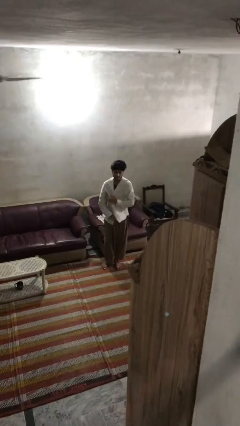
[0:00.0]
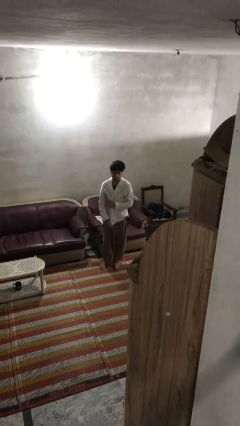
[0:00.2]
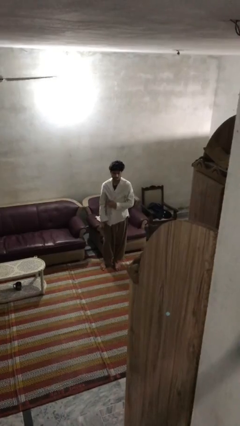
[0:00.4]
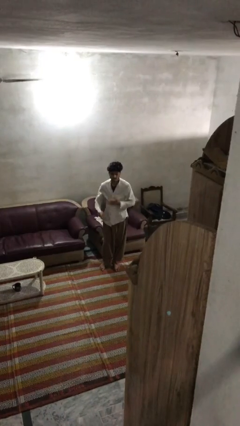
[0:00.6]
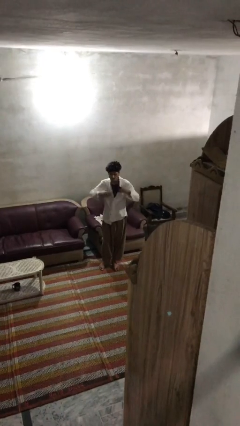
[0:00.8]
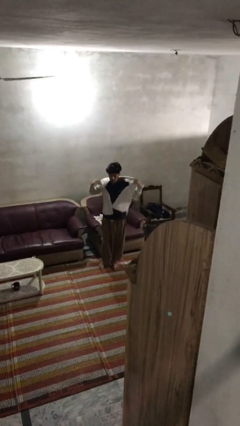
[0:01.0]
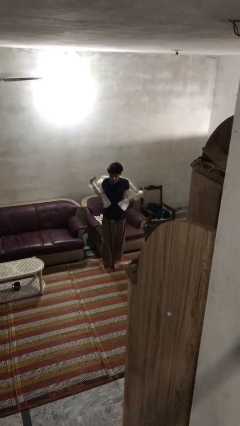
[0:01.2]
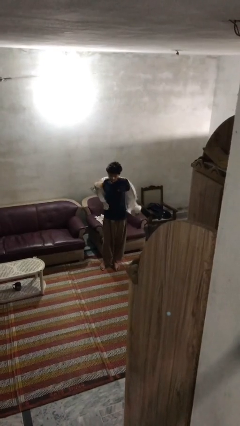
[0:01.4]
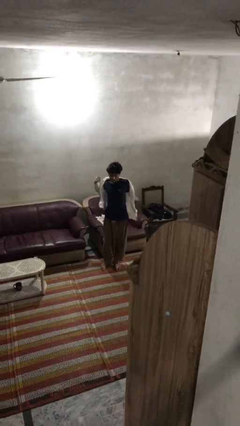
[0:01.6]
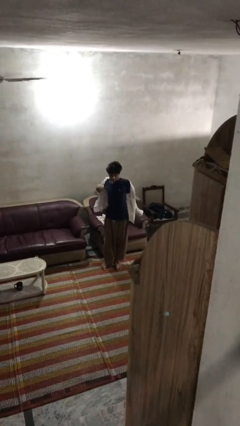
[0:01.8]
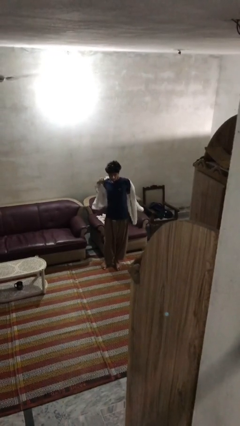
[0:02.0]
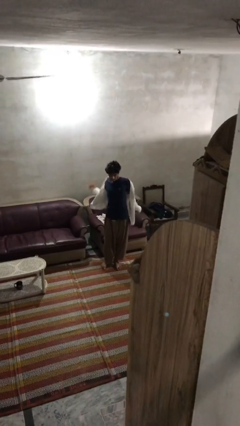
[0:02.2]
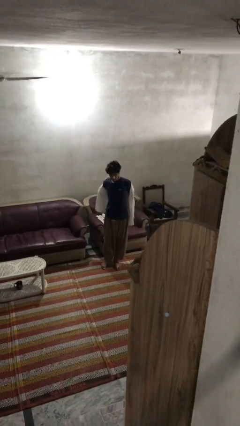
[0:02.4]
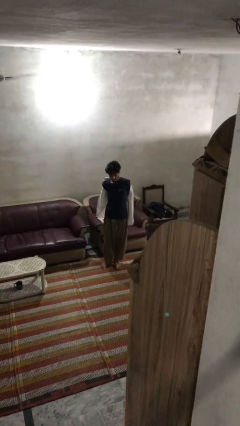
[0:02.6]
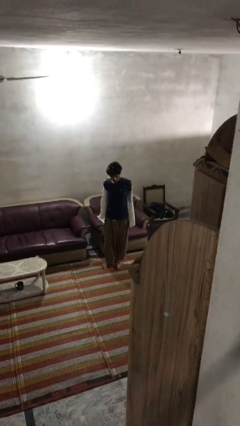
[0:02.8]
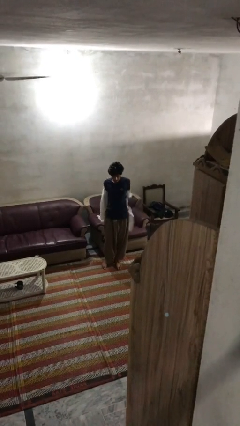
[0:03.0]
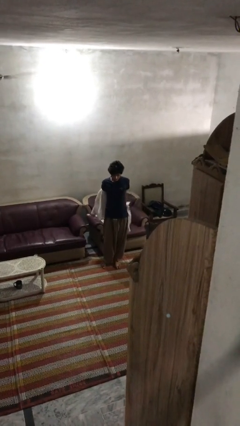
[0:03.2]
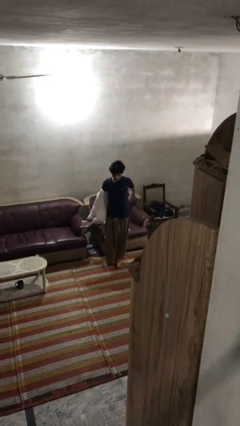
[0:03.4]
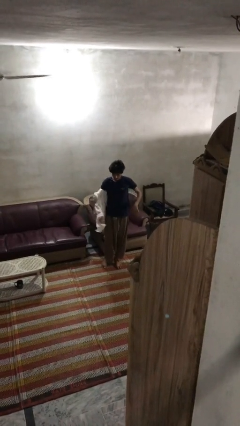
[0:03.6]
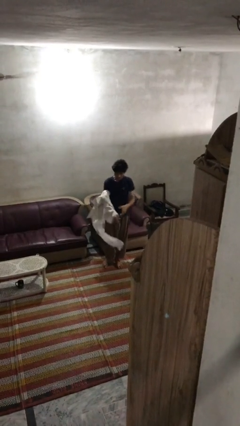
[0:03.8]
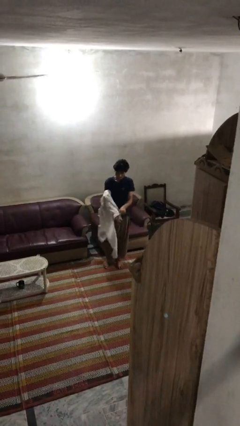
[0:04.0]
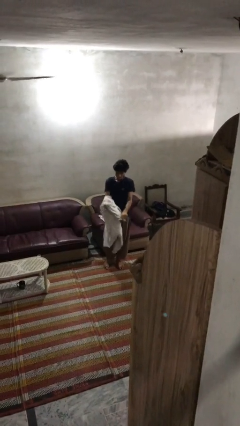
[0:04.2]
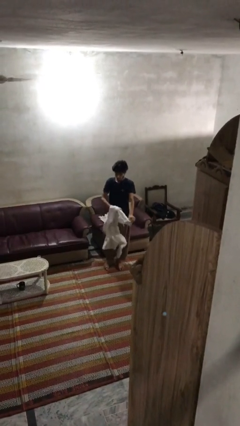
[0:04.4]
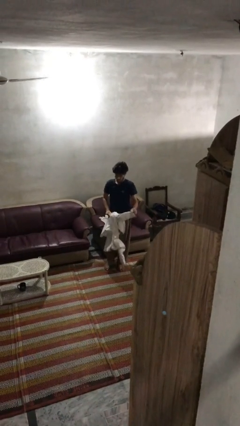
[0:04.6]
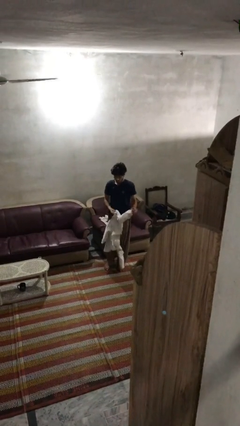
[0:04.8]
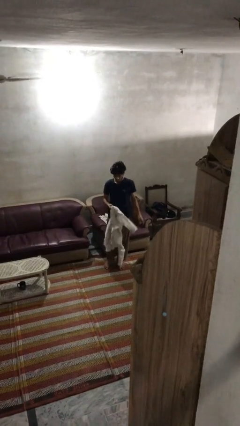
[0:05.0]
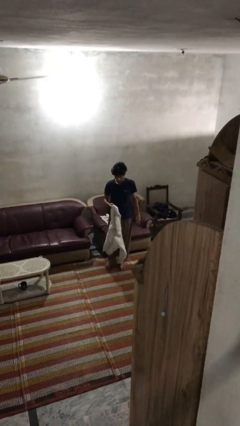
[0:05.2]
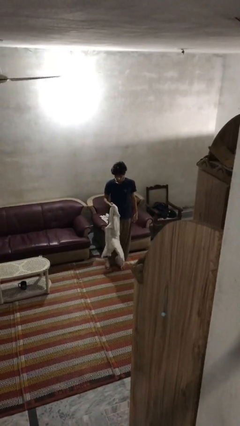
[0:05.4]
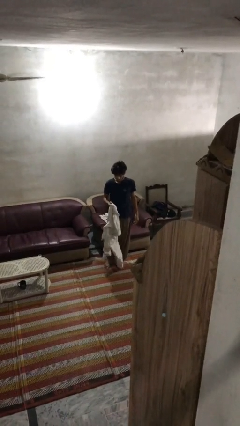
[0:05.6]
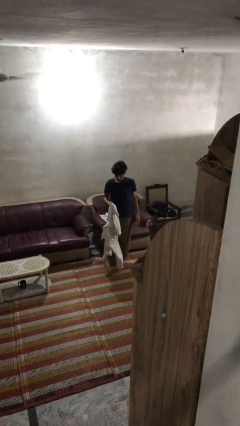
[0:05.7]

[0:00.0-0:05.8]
person takes off shirt

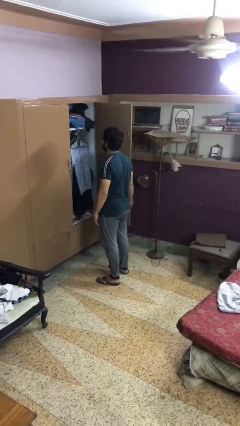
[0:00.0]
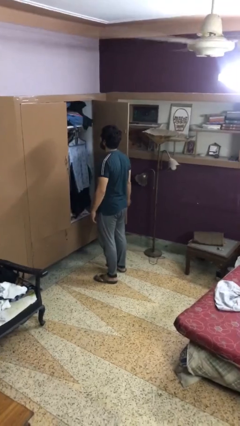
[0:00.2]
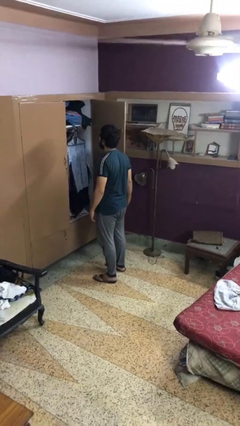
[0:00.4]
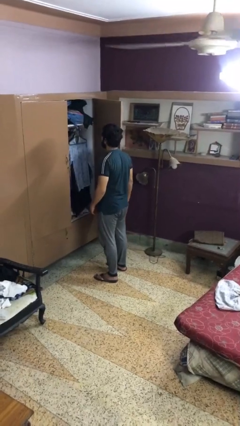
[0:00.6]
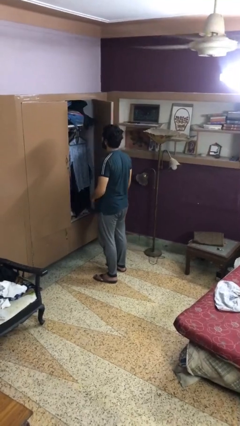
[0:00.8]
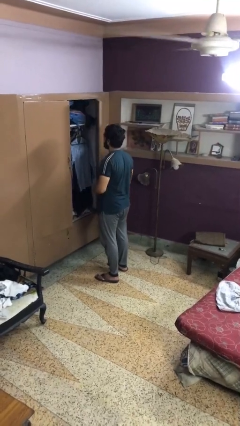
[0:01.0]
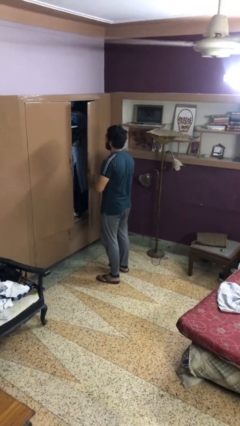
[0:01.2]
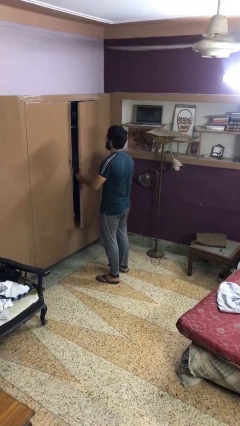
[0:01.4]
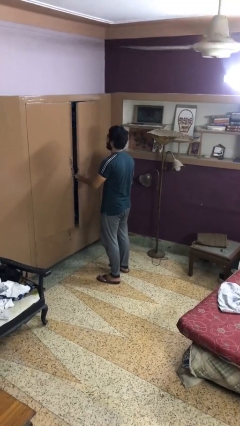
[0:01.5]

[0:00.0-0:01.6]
person closes closet door

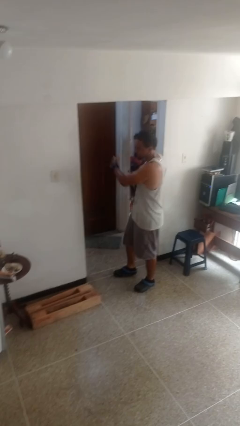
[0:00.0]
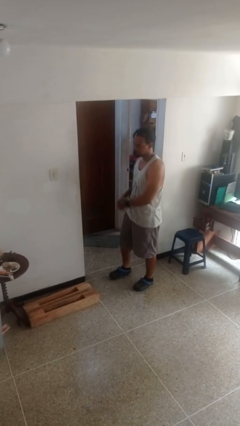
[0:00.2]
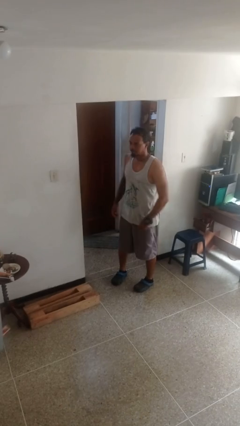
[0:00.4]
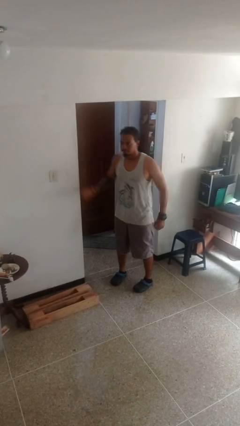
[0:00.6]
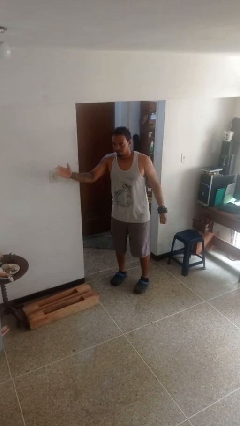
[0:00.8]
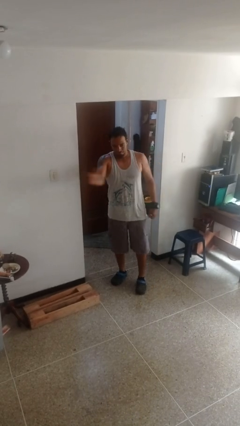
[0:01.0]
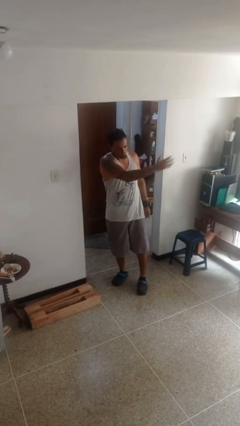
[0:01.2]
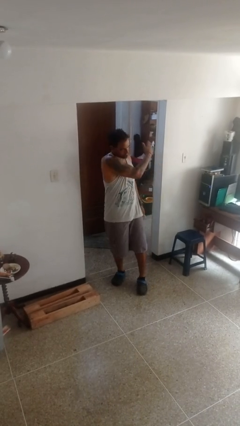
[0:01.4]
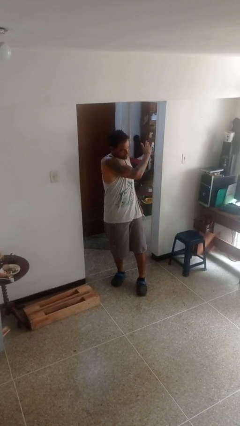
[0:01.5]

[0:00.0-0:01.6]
person gestures swipe left

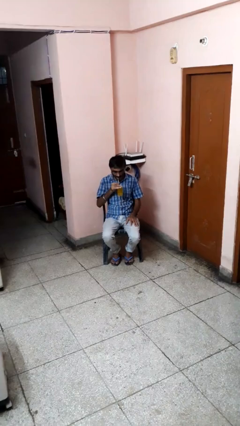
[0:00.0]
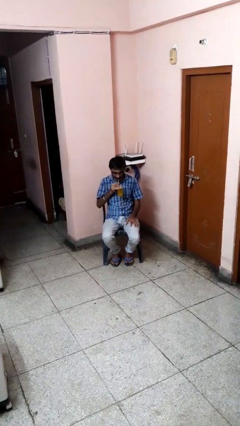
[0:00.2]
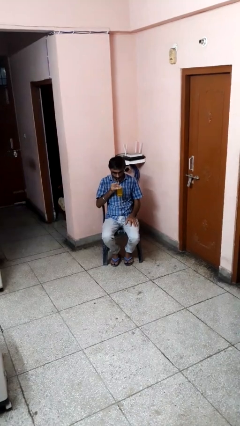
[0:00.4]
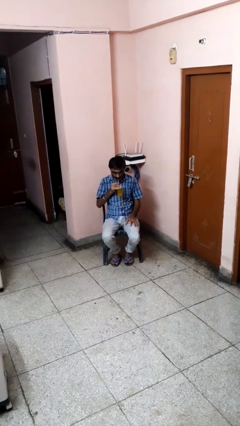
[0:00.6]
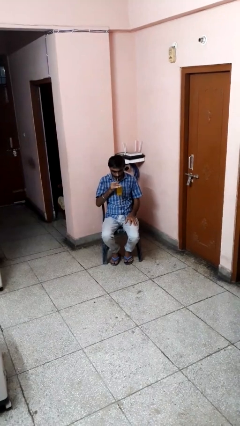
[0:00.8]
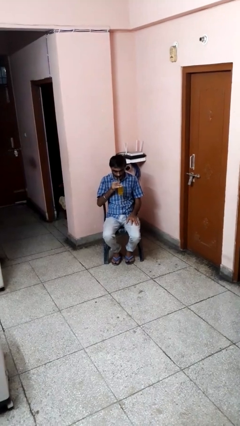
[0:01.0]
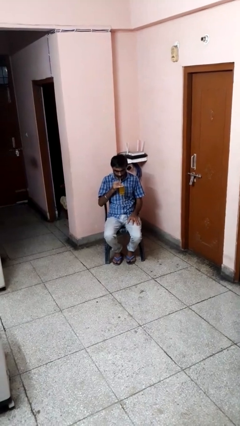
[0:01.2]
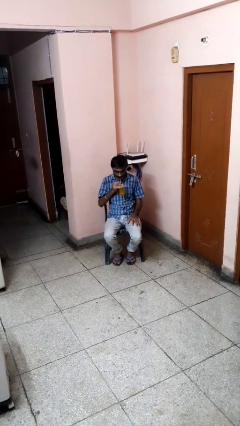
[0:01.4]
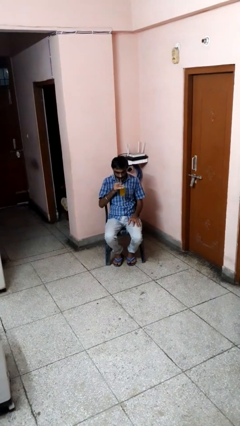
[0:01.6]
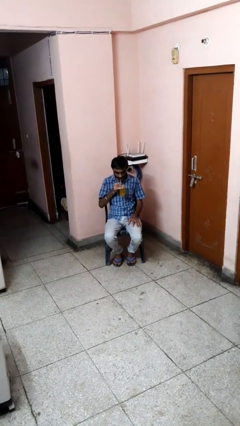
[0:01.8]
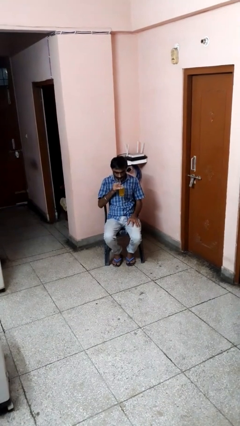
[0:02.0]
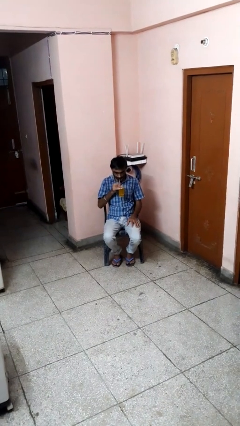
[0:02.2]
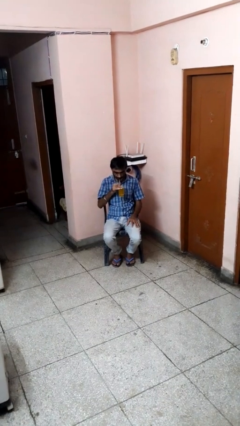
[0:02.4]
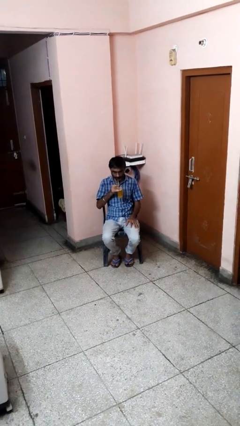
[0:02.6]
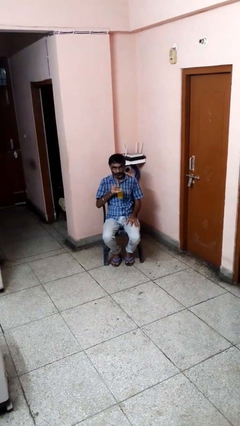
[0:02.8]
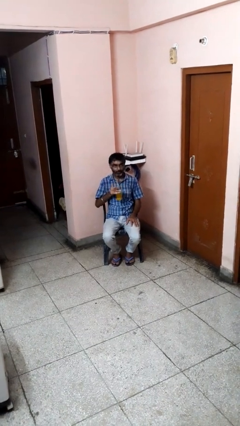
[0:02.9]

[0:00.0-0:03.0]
person drinks from straw

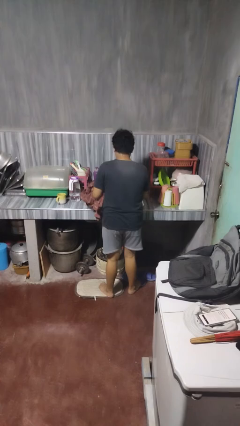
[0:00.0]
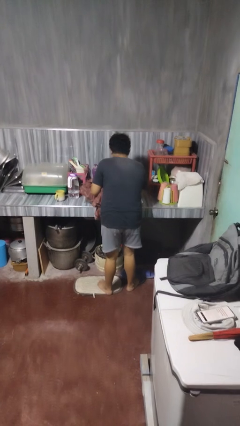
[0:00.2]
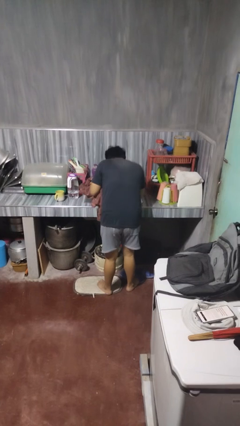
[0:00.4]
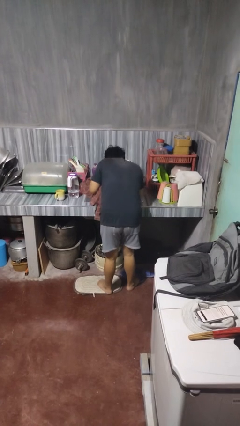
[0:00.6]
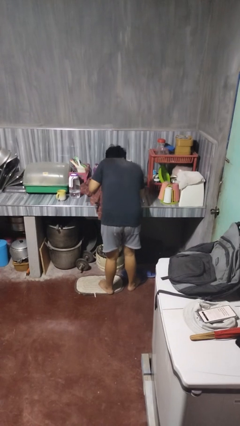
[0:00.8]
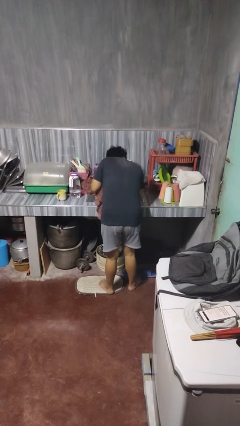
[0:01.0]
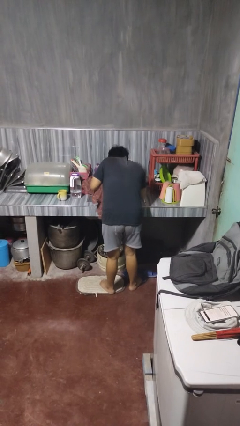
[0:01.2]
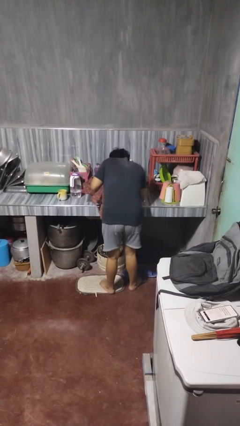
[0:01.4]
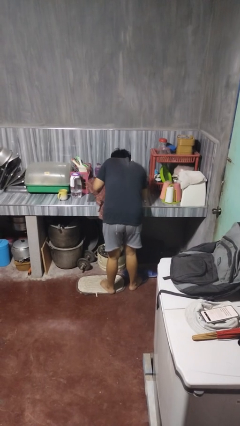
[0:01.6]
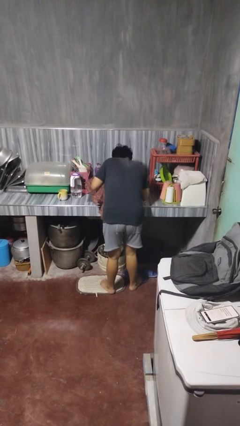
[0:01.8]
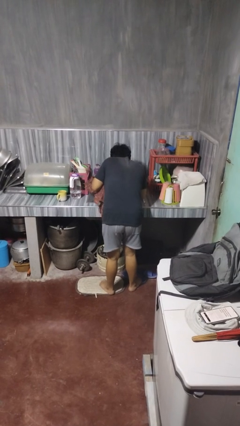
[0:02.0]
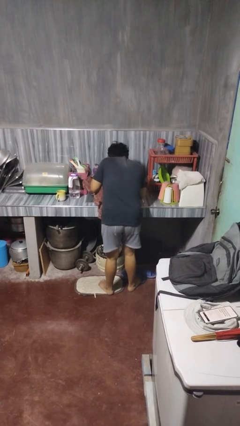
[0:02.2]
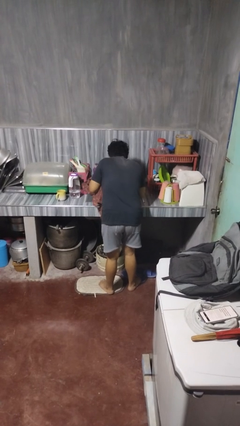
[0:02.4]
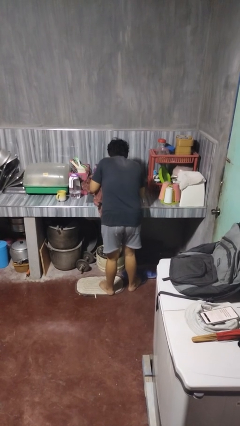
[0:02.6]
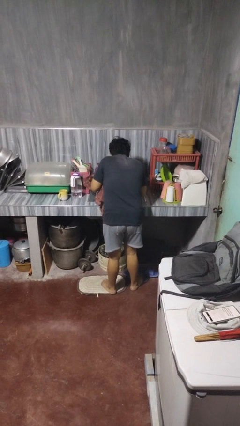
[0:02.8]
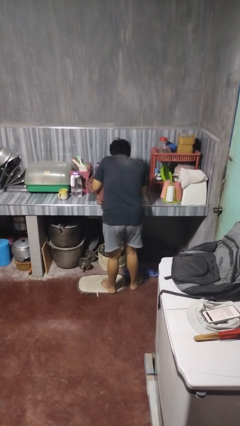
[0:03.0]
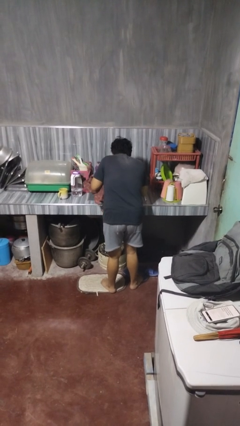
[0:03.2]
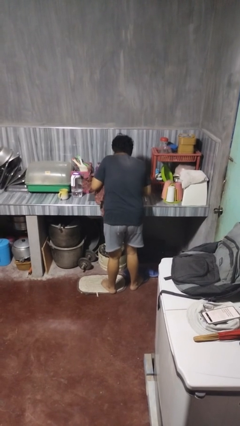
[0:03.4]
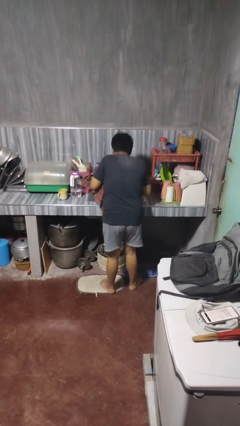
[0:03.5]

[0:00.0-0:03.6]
person washes face

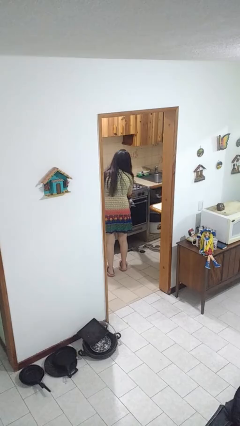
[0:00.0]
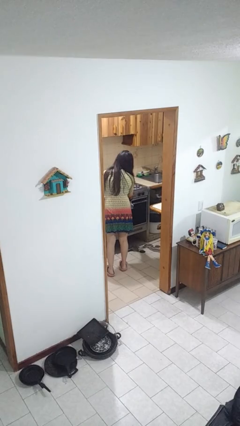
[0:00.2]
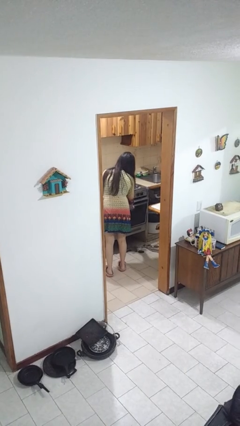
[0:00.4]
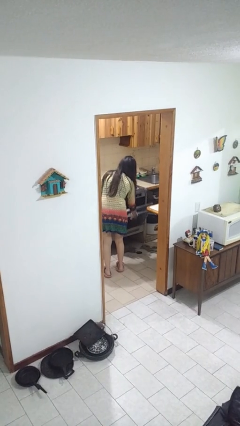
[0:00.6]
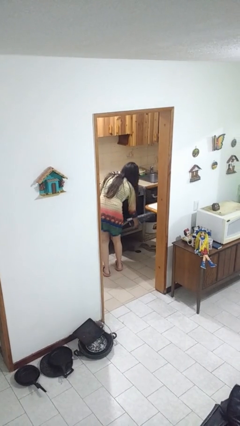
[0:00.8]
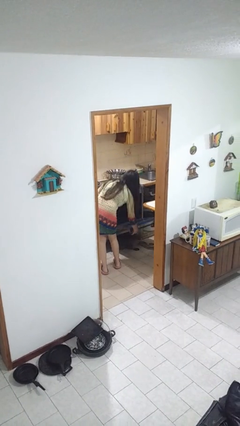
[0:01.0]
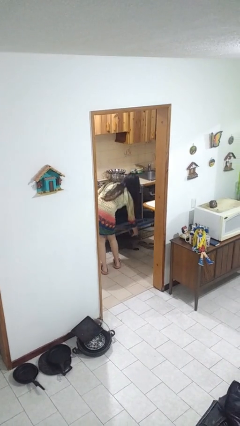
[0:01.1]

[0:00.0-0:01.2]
person opens oven door

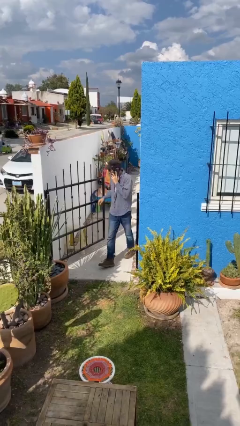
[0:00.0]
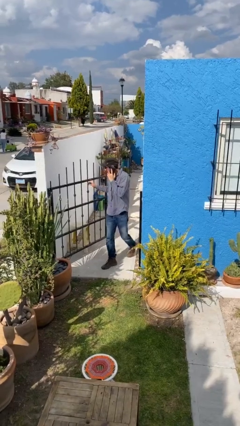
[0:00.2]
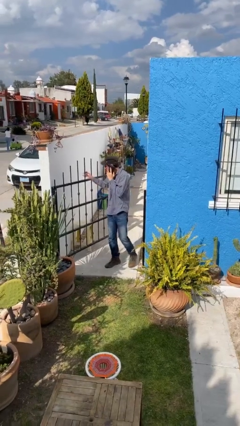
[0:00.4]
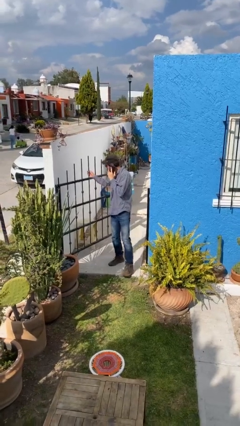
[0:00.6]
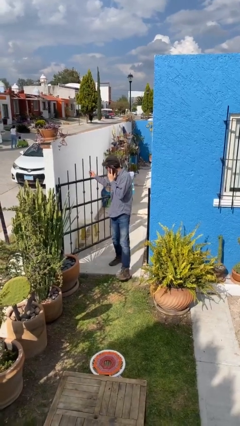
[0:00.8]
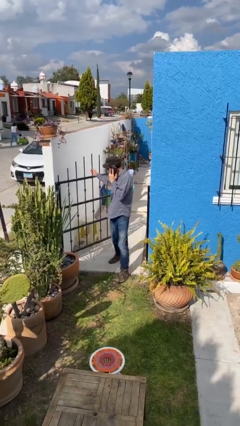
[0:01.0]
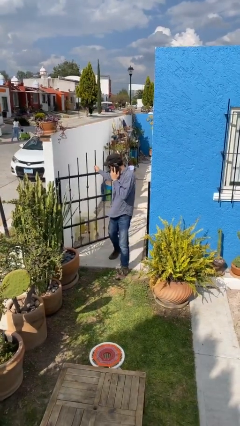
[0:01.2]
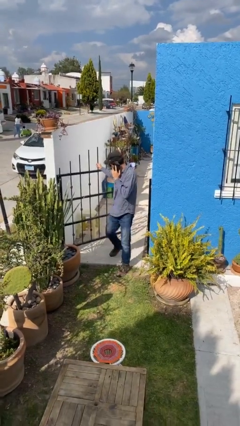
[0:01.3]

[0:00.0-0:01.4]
person enters scene through structure
